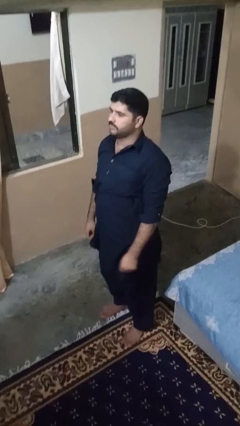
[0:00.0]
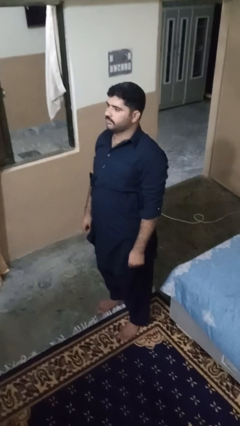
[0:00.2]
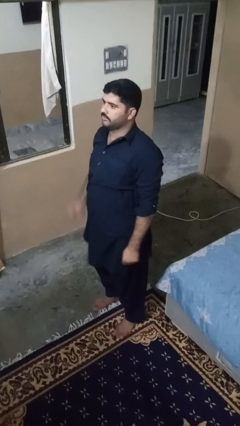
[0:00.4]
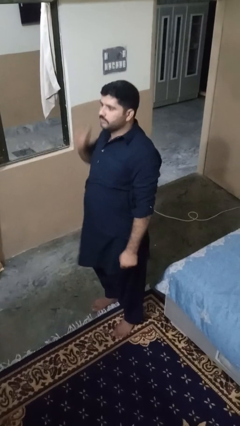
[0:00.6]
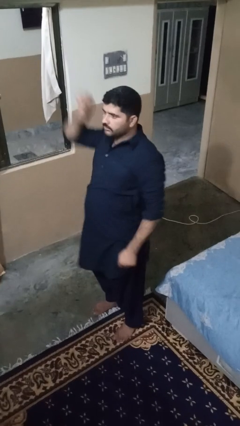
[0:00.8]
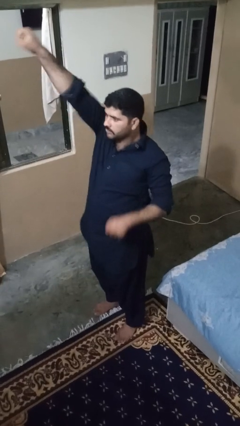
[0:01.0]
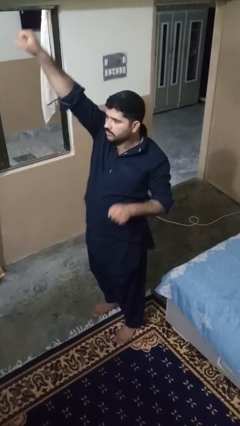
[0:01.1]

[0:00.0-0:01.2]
person punches

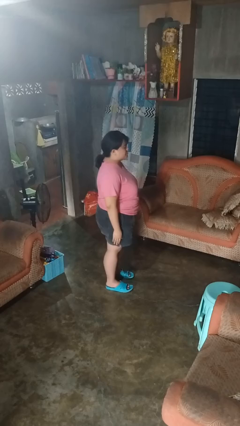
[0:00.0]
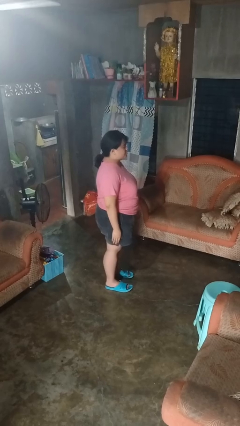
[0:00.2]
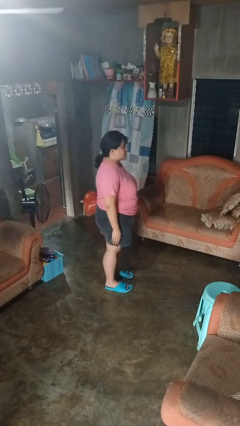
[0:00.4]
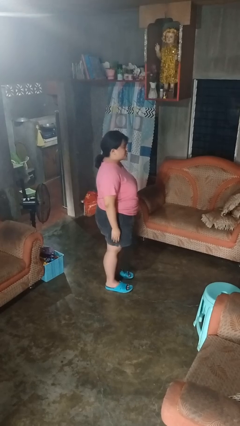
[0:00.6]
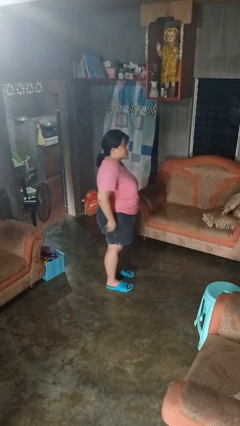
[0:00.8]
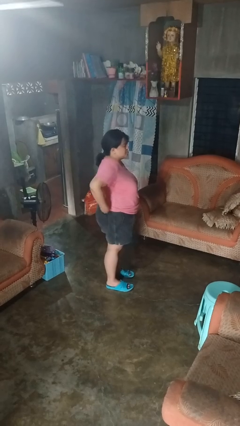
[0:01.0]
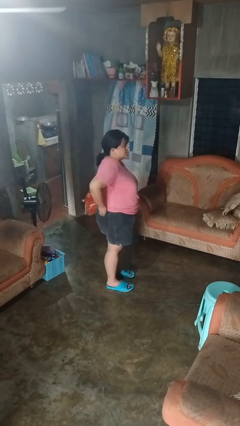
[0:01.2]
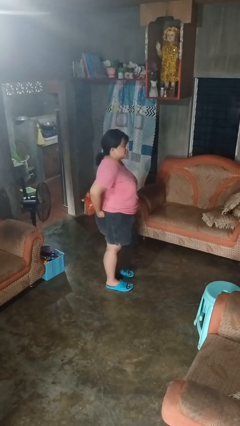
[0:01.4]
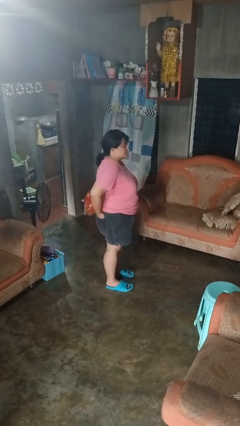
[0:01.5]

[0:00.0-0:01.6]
person puts hands in back pockets

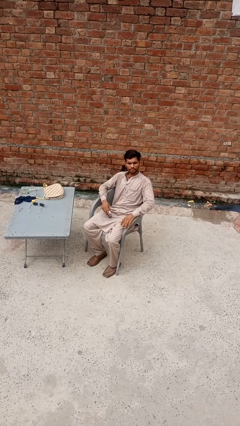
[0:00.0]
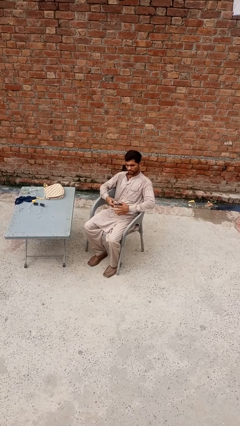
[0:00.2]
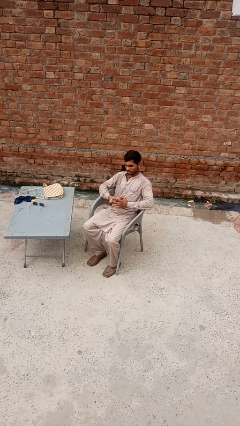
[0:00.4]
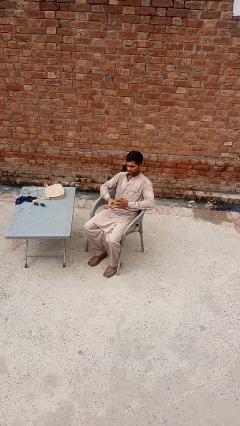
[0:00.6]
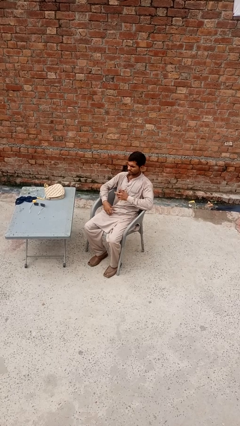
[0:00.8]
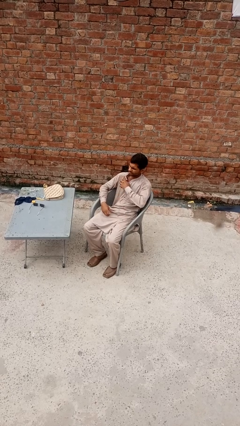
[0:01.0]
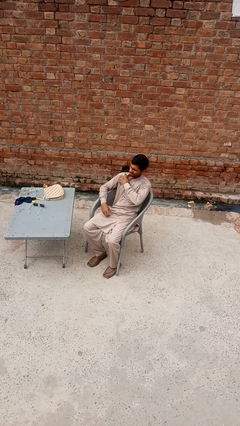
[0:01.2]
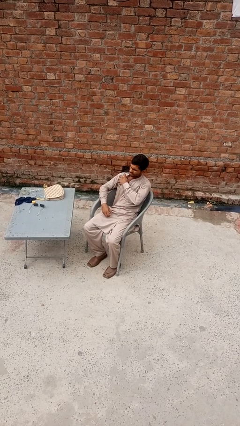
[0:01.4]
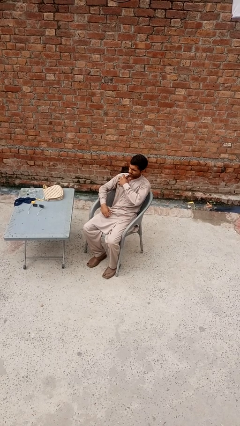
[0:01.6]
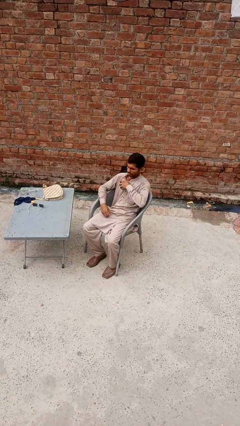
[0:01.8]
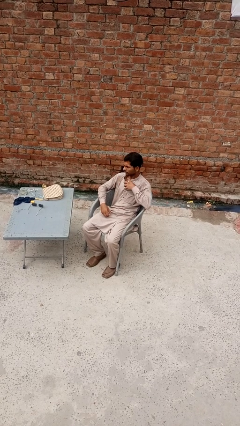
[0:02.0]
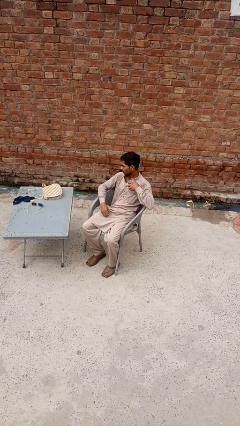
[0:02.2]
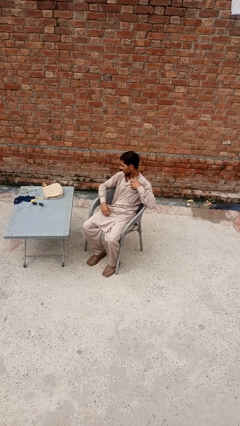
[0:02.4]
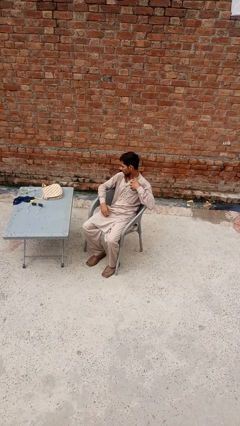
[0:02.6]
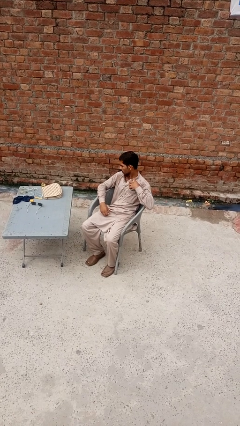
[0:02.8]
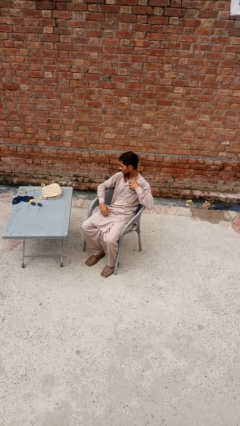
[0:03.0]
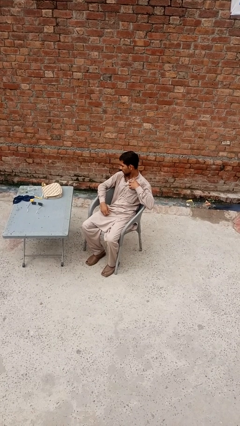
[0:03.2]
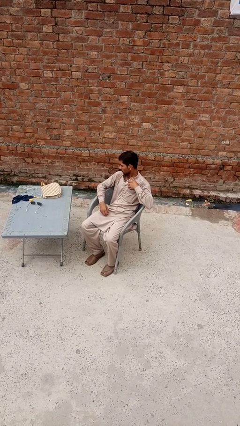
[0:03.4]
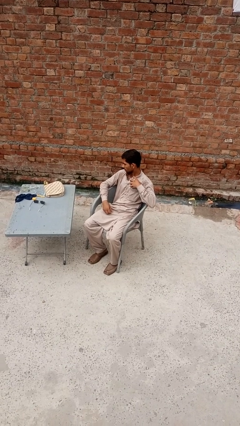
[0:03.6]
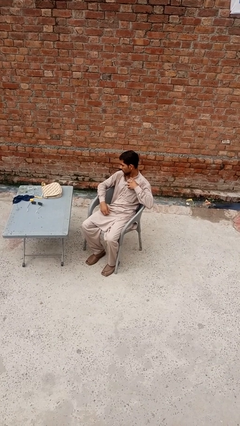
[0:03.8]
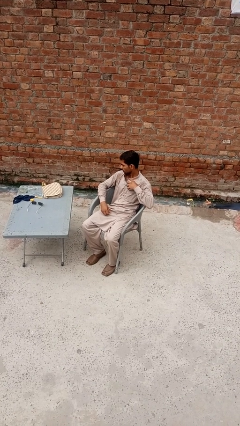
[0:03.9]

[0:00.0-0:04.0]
person applies deodorant

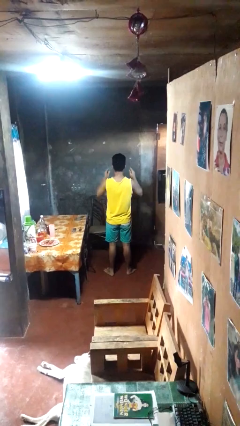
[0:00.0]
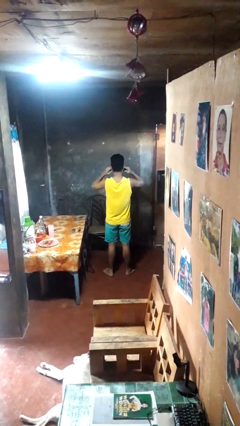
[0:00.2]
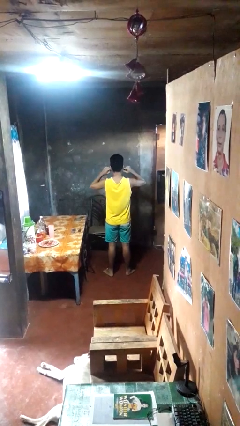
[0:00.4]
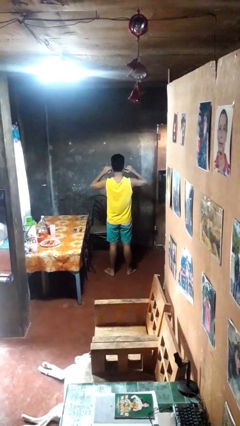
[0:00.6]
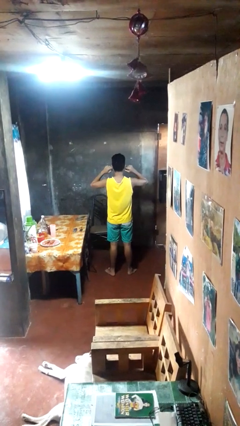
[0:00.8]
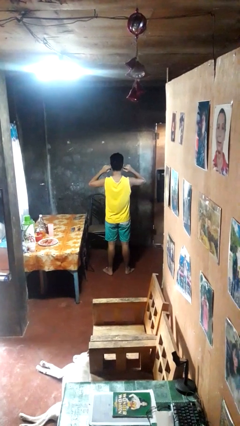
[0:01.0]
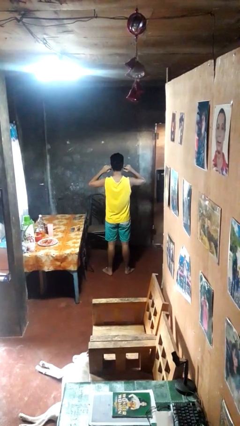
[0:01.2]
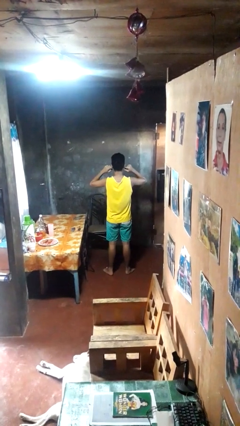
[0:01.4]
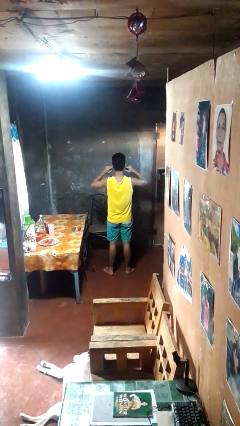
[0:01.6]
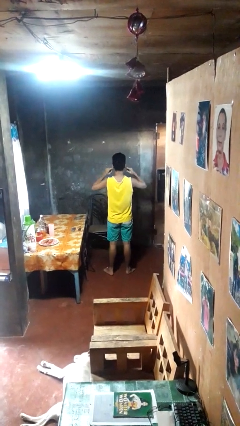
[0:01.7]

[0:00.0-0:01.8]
person puts fingers in ear

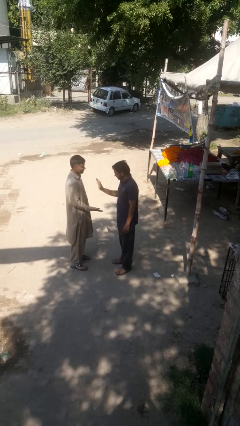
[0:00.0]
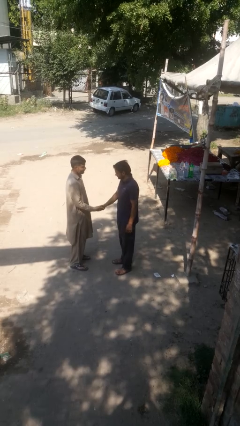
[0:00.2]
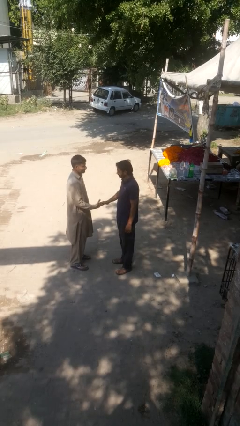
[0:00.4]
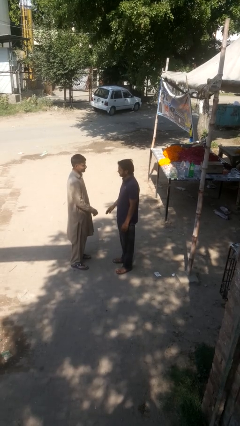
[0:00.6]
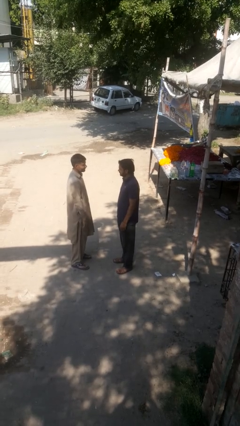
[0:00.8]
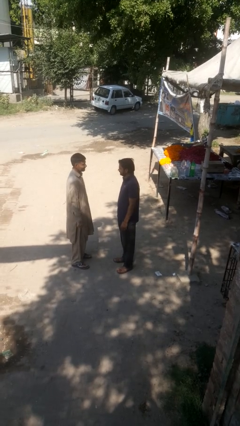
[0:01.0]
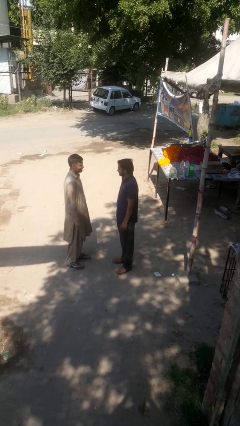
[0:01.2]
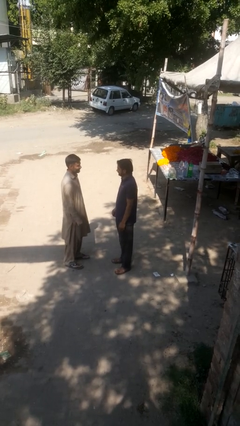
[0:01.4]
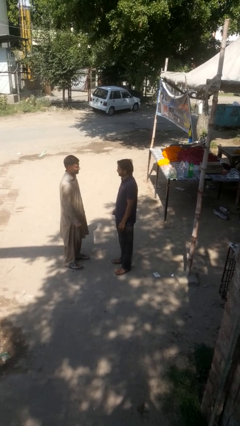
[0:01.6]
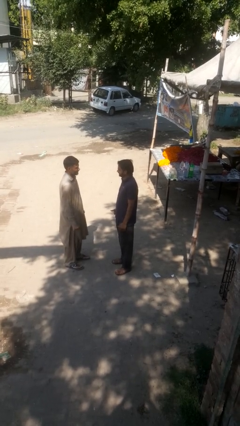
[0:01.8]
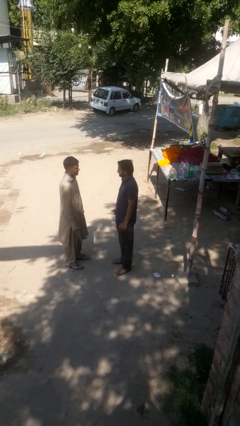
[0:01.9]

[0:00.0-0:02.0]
person highfives hand

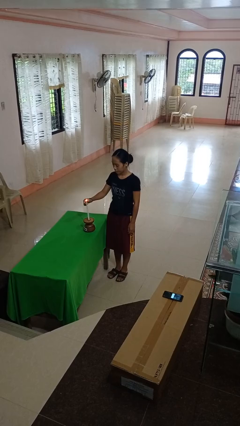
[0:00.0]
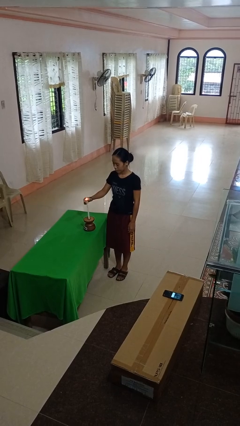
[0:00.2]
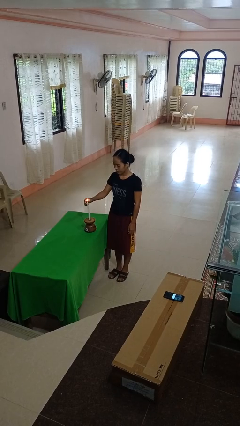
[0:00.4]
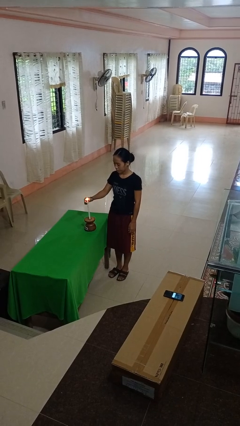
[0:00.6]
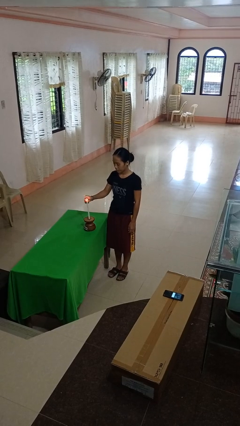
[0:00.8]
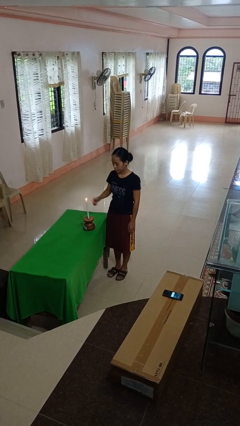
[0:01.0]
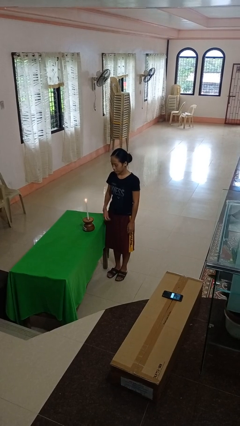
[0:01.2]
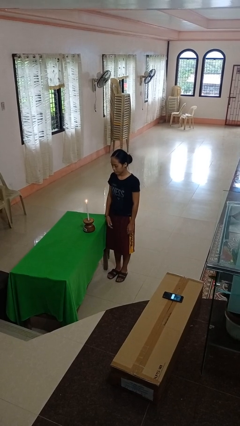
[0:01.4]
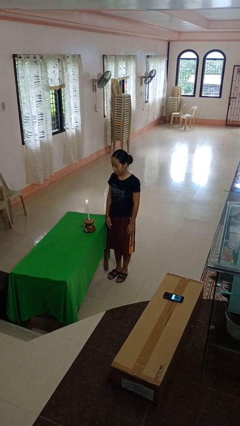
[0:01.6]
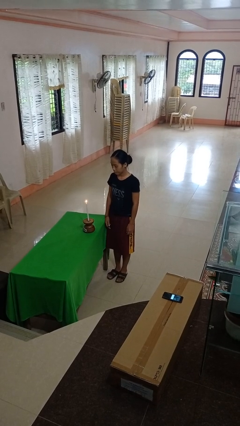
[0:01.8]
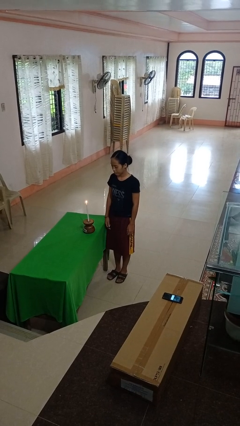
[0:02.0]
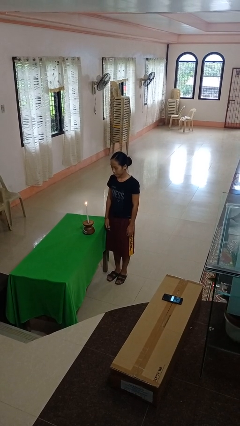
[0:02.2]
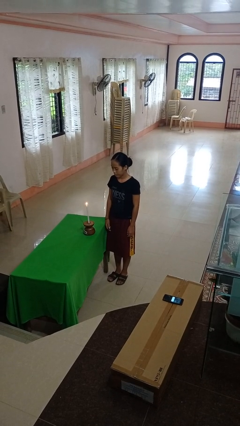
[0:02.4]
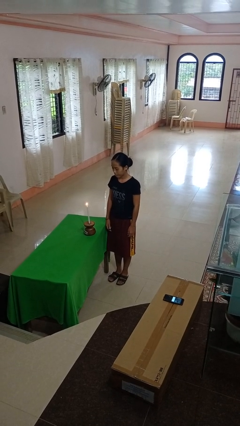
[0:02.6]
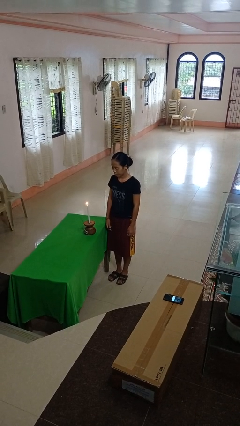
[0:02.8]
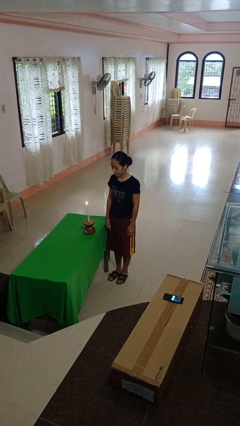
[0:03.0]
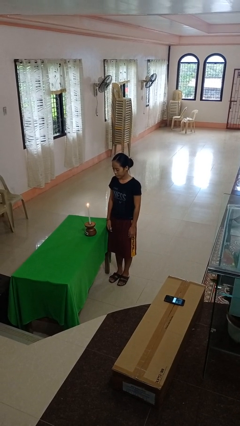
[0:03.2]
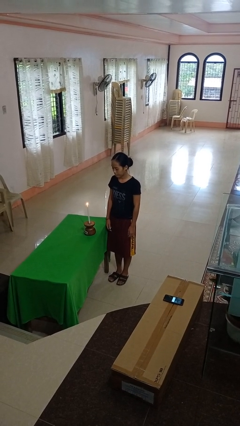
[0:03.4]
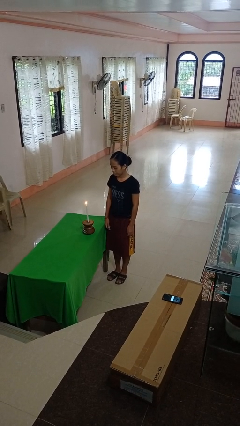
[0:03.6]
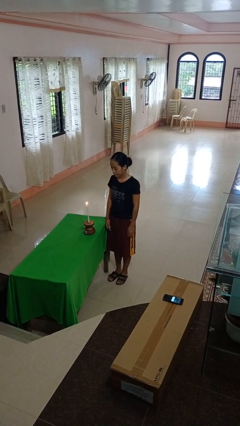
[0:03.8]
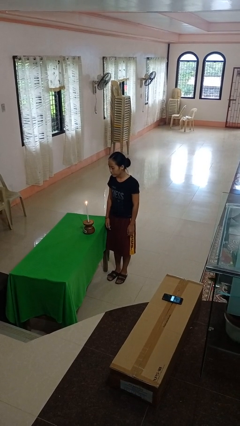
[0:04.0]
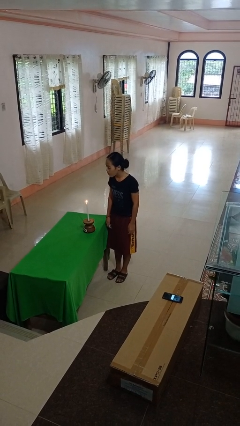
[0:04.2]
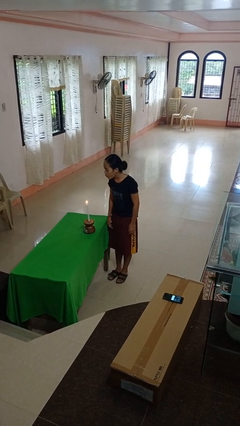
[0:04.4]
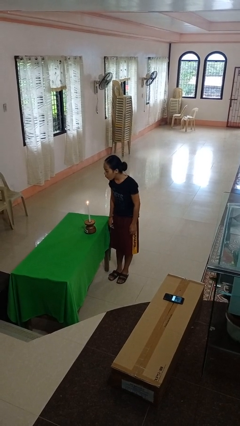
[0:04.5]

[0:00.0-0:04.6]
person lights candle

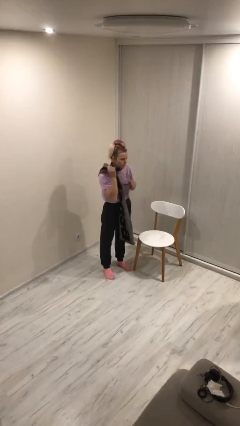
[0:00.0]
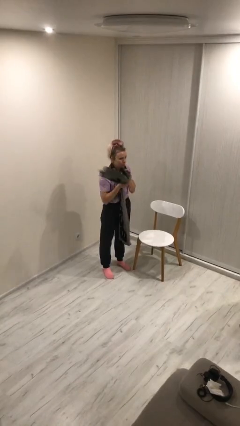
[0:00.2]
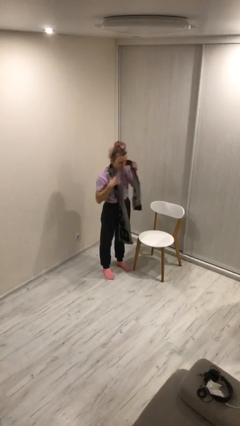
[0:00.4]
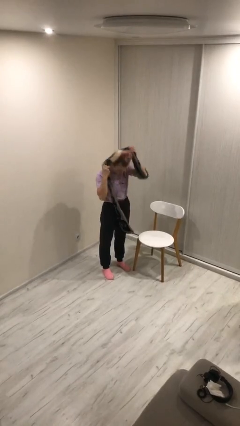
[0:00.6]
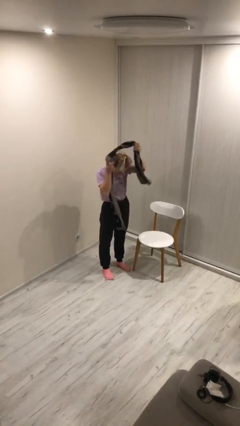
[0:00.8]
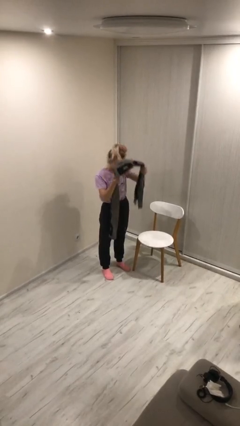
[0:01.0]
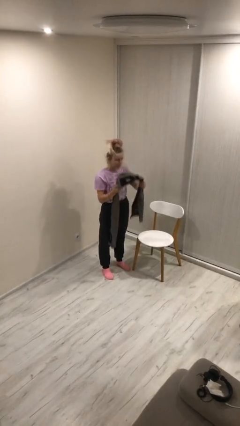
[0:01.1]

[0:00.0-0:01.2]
person takes off scarf

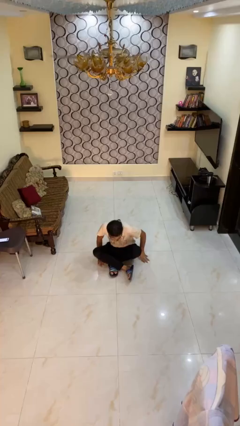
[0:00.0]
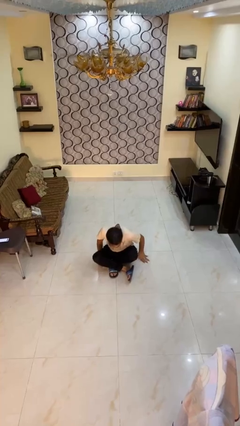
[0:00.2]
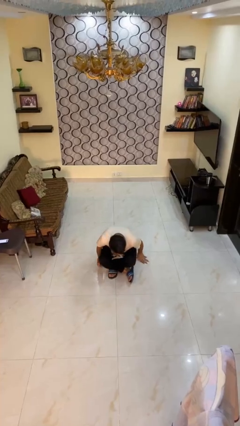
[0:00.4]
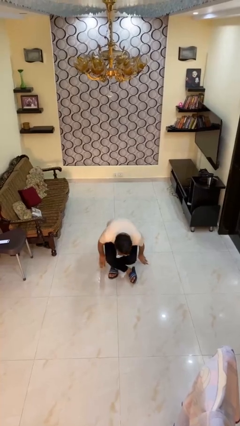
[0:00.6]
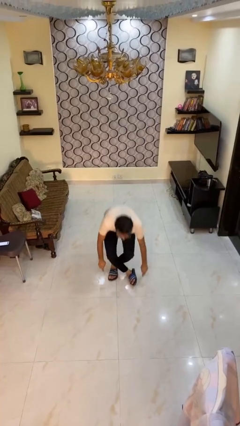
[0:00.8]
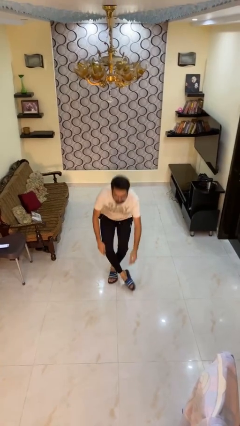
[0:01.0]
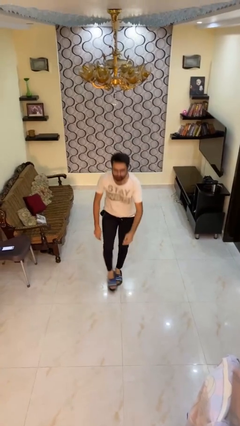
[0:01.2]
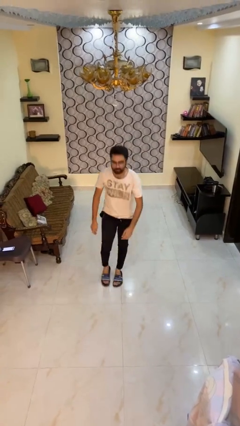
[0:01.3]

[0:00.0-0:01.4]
person stands up from floor
